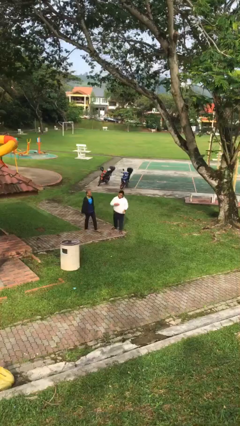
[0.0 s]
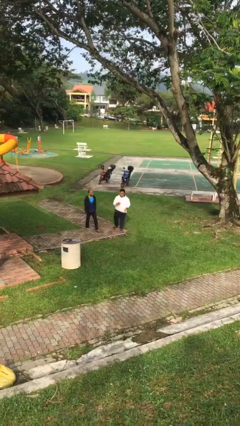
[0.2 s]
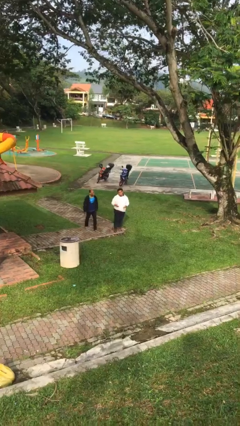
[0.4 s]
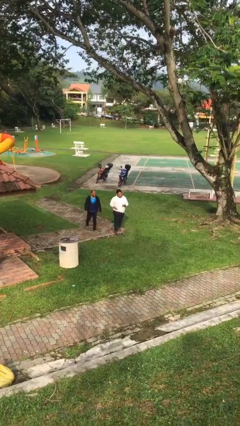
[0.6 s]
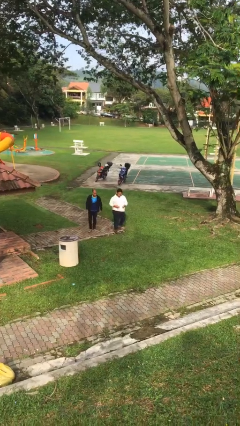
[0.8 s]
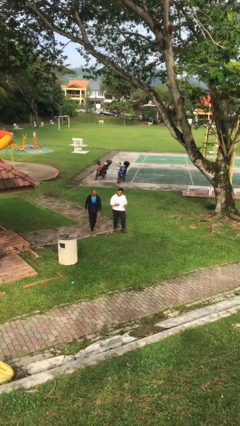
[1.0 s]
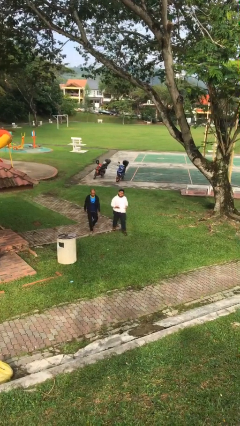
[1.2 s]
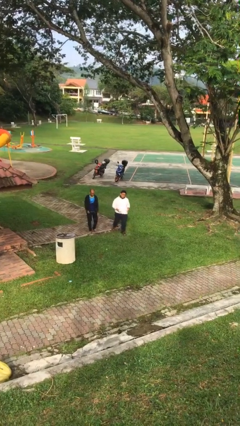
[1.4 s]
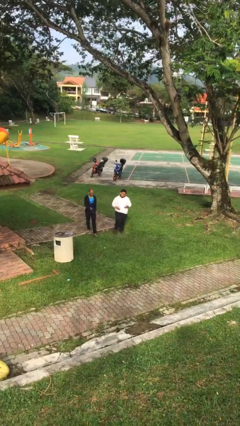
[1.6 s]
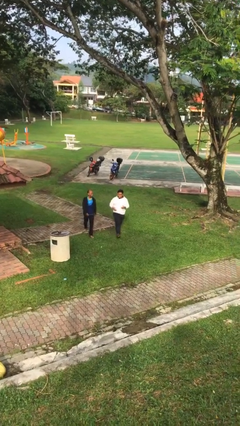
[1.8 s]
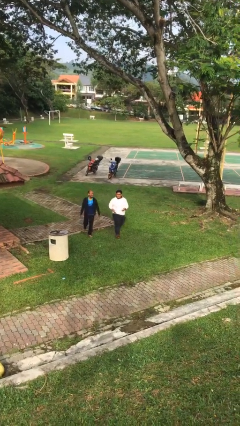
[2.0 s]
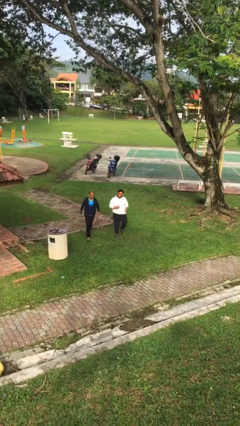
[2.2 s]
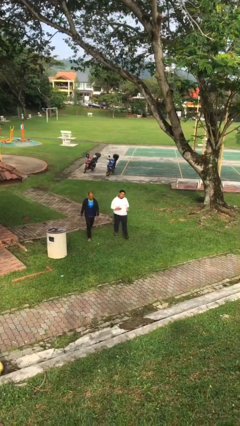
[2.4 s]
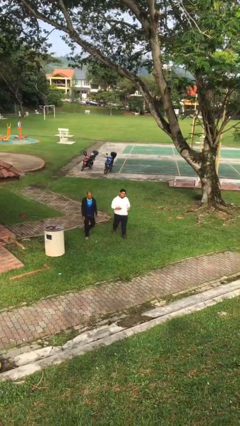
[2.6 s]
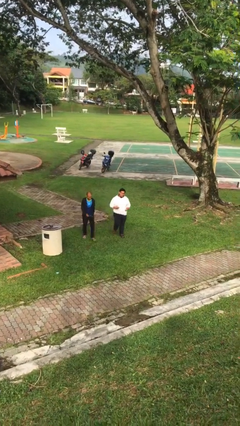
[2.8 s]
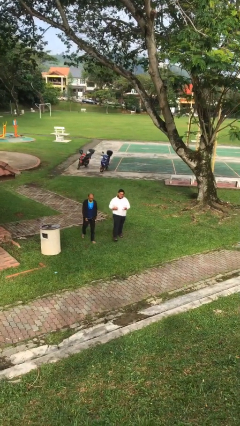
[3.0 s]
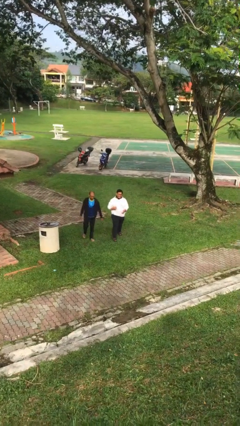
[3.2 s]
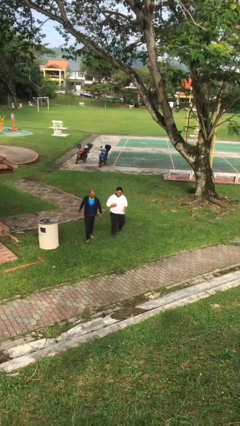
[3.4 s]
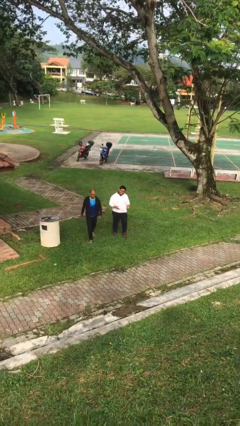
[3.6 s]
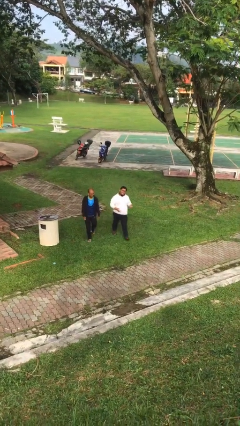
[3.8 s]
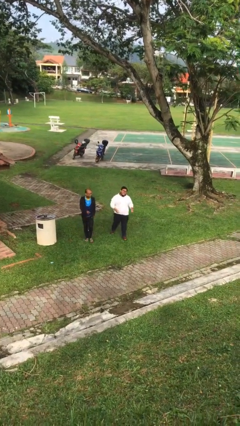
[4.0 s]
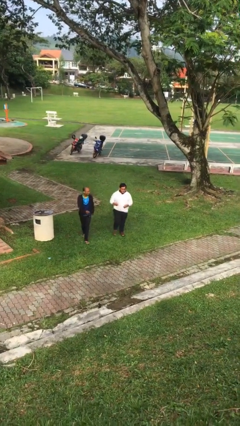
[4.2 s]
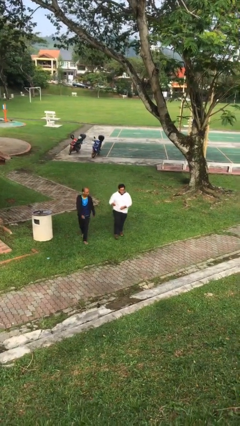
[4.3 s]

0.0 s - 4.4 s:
person talks to person

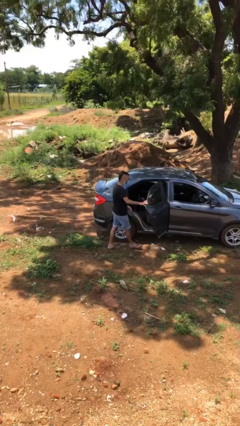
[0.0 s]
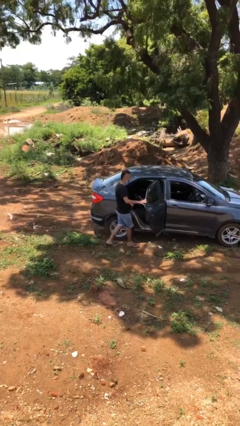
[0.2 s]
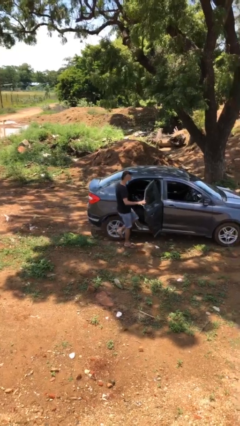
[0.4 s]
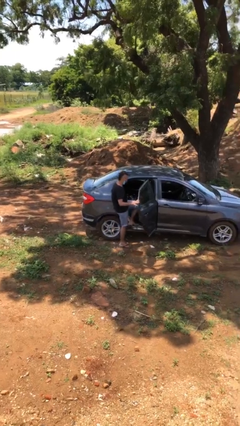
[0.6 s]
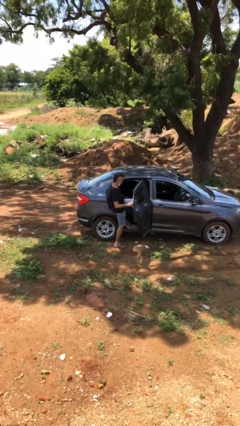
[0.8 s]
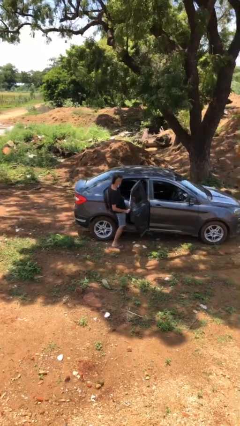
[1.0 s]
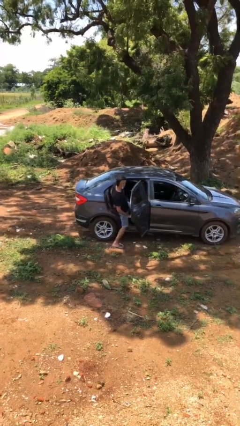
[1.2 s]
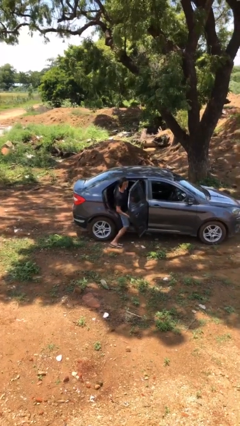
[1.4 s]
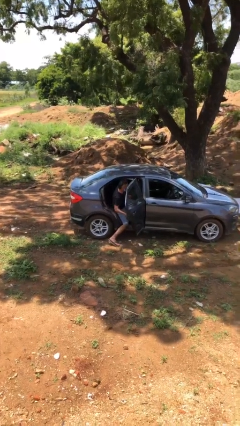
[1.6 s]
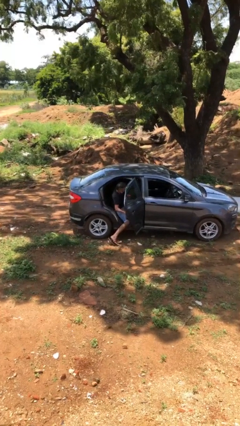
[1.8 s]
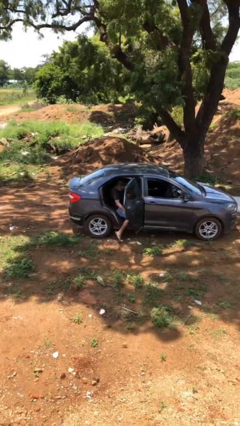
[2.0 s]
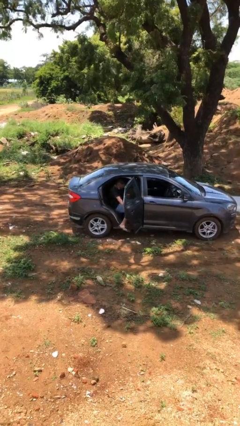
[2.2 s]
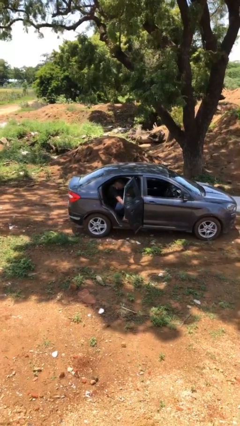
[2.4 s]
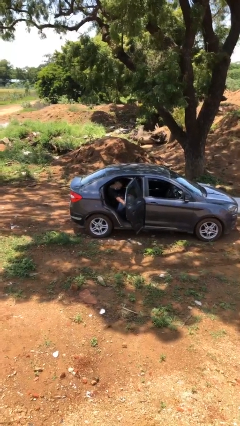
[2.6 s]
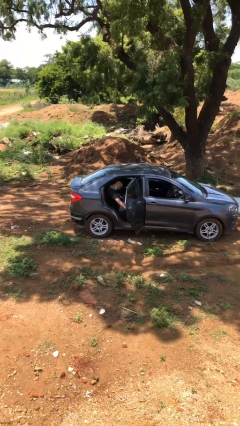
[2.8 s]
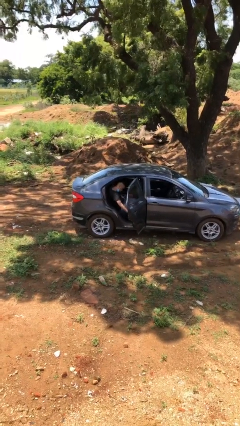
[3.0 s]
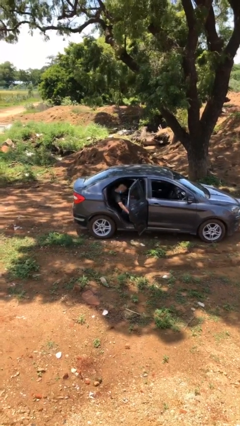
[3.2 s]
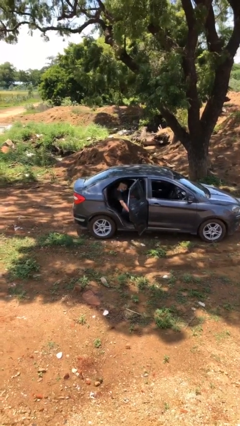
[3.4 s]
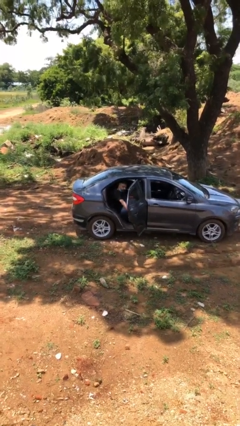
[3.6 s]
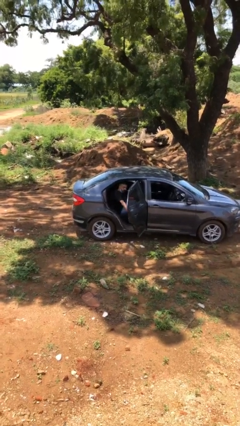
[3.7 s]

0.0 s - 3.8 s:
person enters car

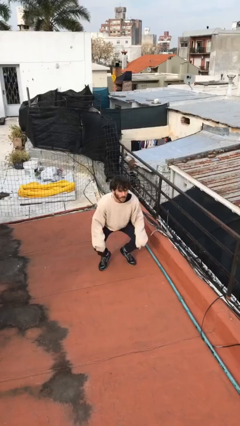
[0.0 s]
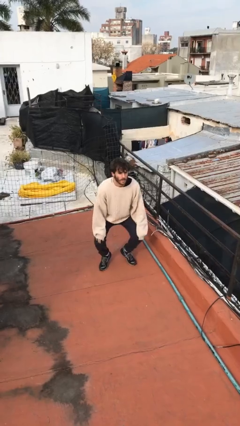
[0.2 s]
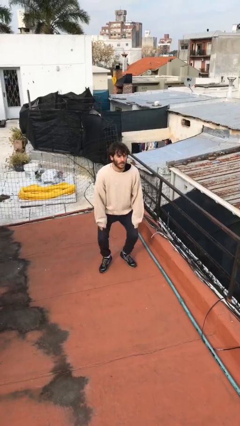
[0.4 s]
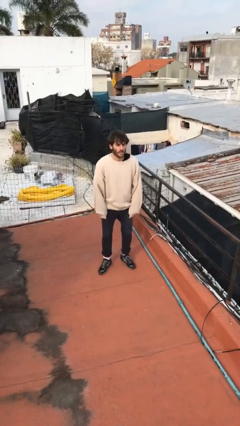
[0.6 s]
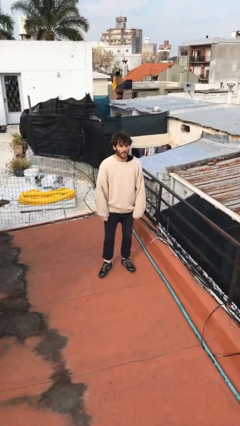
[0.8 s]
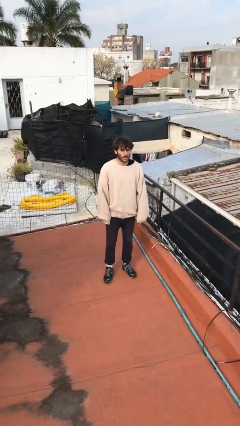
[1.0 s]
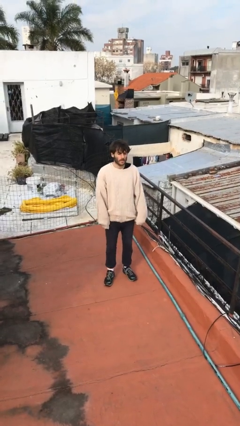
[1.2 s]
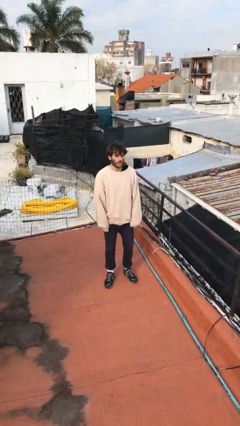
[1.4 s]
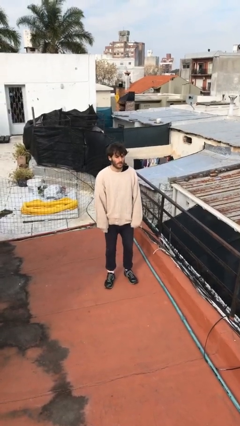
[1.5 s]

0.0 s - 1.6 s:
person stands up

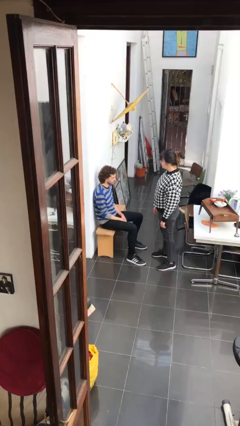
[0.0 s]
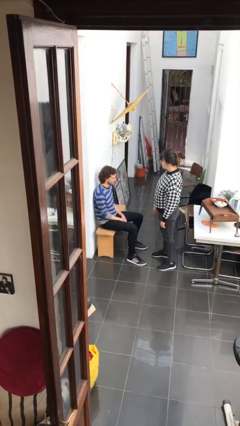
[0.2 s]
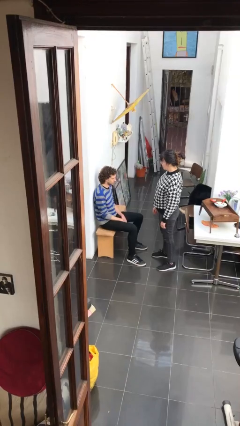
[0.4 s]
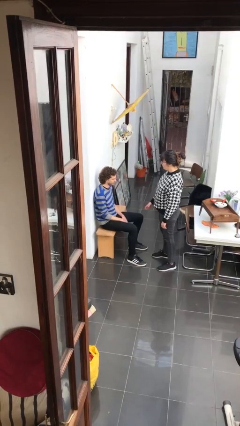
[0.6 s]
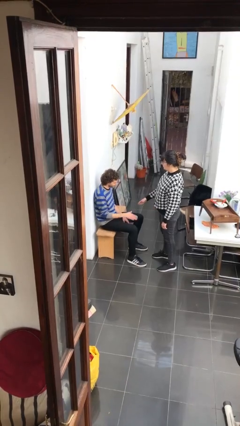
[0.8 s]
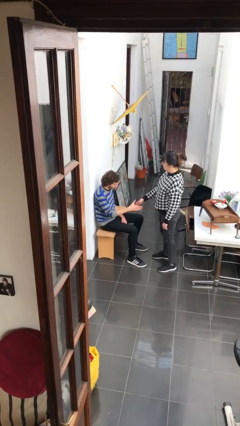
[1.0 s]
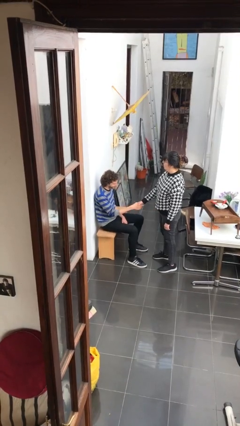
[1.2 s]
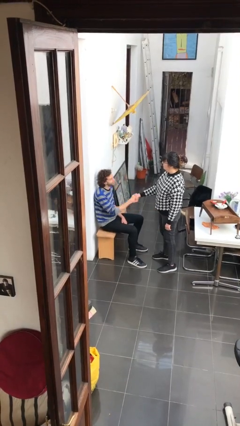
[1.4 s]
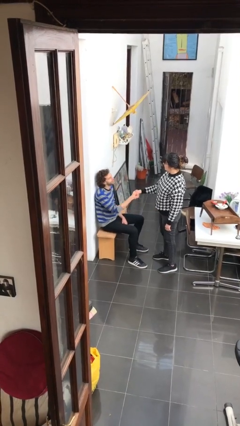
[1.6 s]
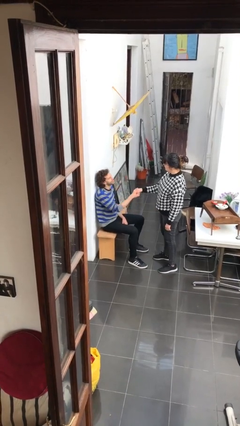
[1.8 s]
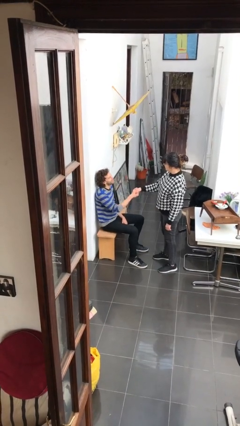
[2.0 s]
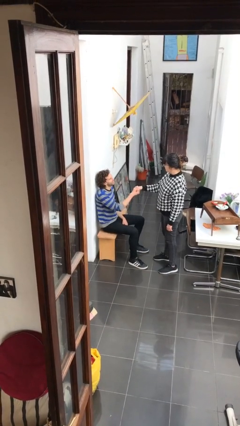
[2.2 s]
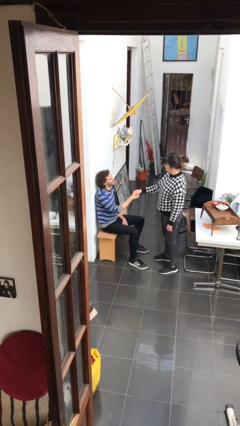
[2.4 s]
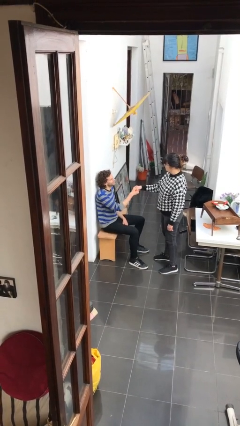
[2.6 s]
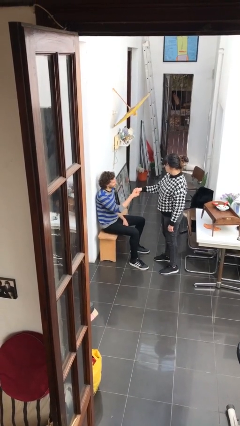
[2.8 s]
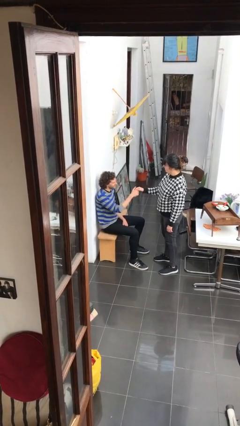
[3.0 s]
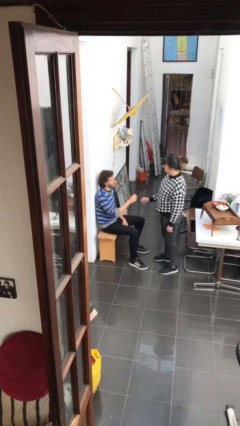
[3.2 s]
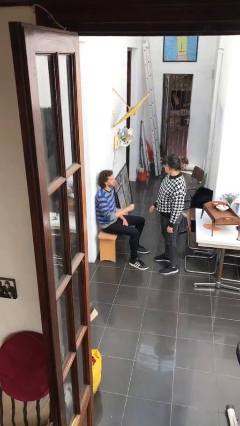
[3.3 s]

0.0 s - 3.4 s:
person shakes hand

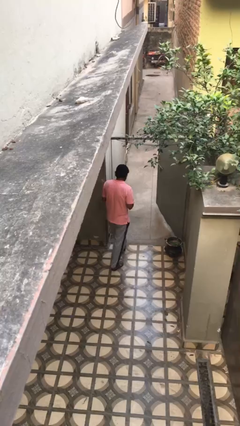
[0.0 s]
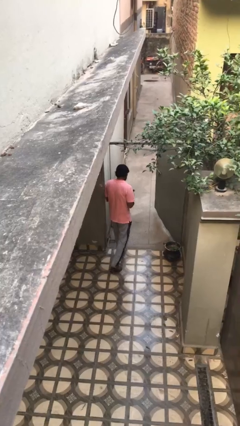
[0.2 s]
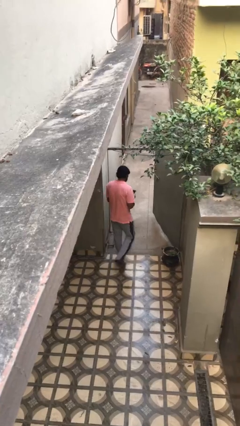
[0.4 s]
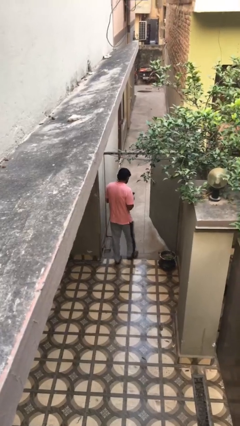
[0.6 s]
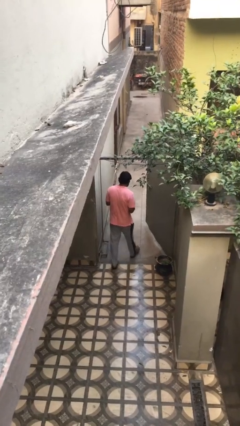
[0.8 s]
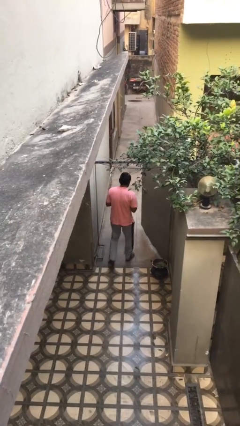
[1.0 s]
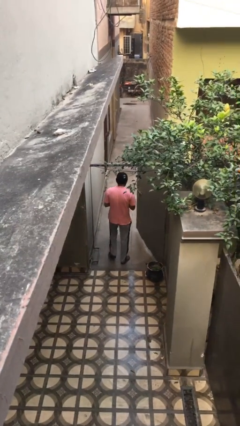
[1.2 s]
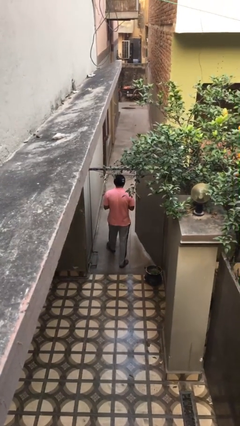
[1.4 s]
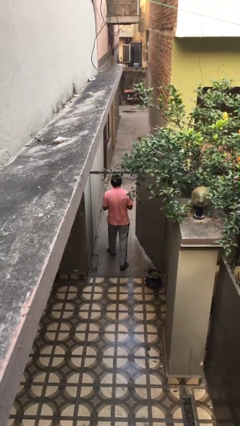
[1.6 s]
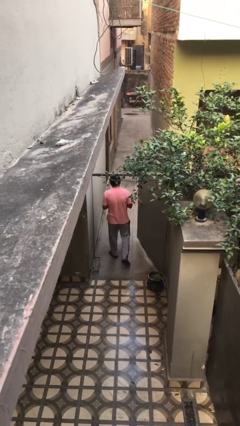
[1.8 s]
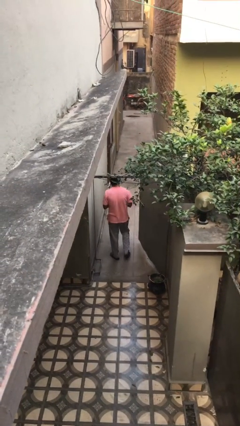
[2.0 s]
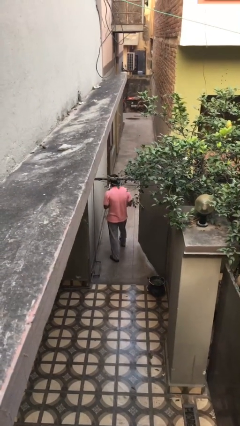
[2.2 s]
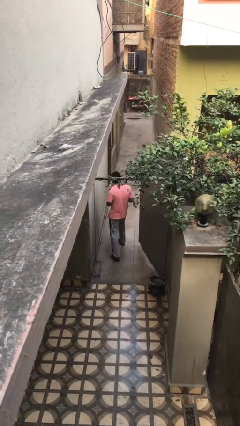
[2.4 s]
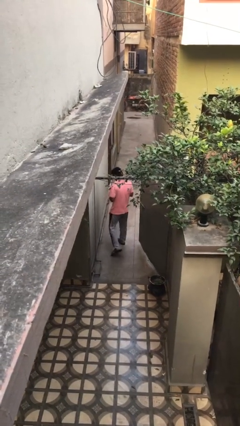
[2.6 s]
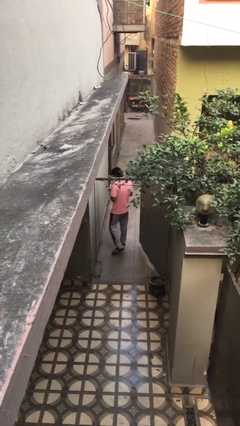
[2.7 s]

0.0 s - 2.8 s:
person exits scene through structure

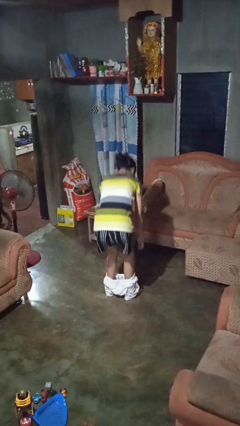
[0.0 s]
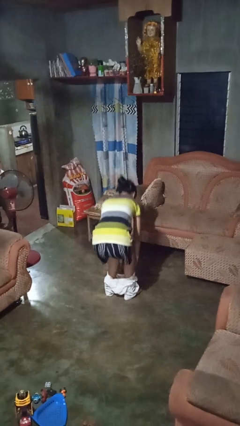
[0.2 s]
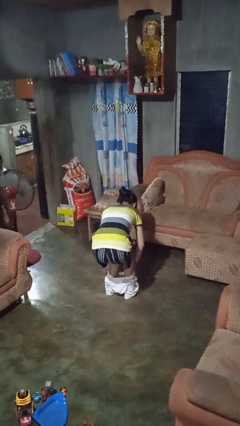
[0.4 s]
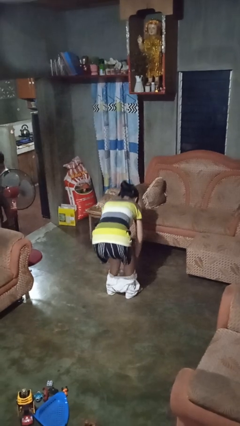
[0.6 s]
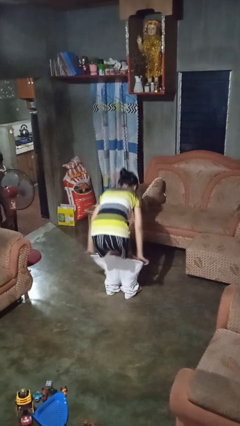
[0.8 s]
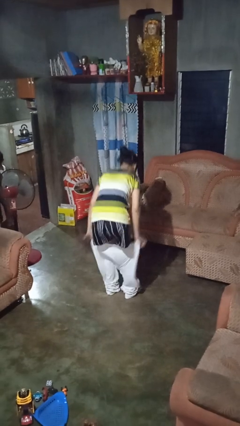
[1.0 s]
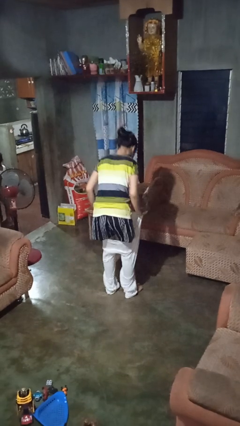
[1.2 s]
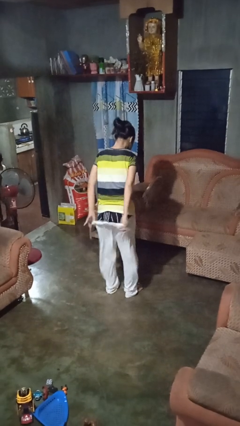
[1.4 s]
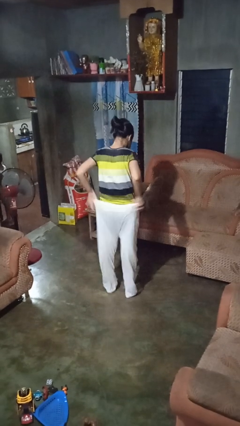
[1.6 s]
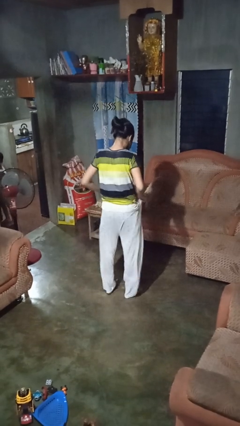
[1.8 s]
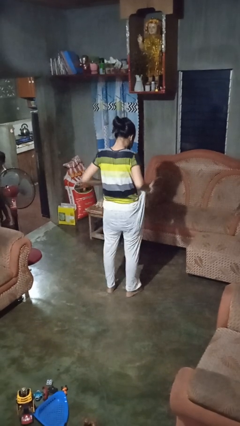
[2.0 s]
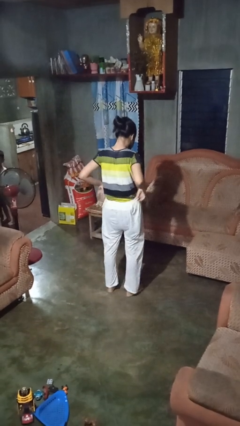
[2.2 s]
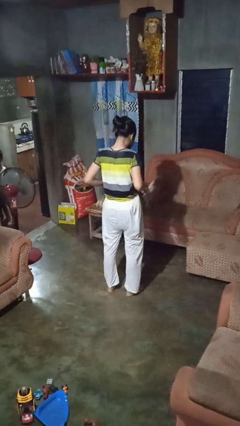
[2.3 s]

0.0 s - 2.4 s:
person puts on pants
